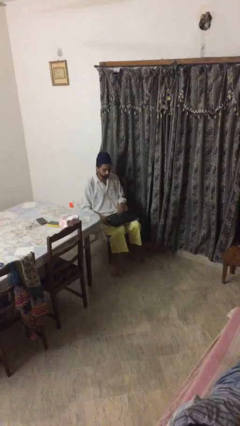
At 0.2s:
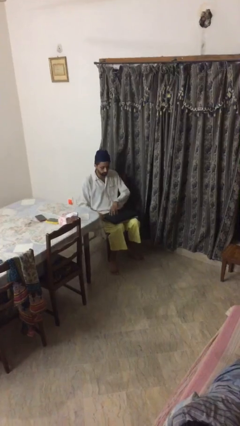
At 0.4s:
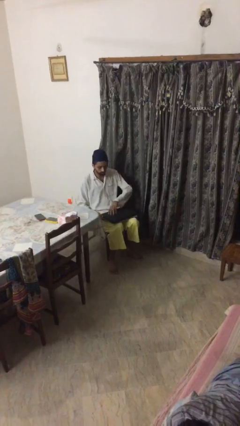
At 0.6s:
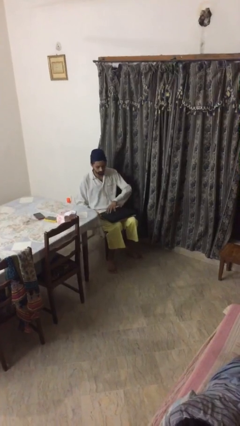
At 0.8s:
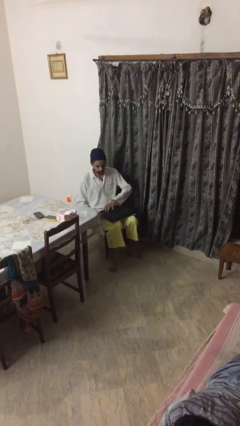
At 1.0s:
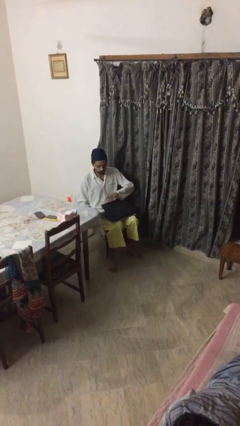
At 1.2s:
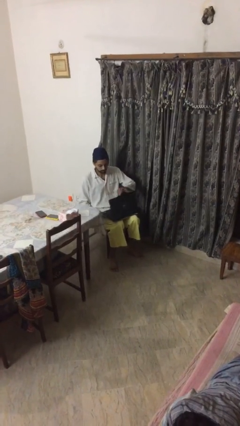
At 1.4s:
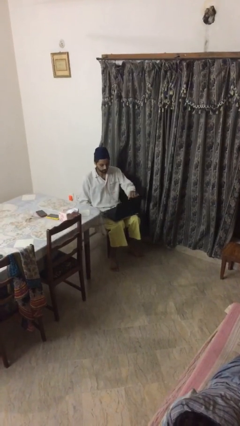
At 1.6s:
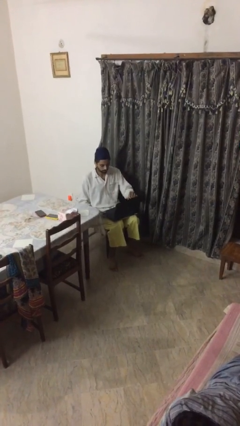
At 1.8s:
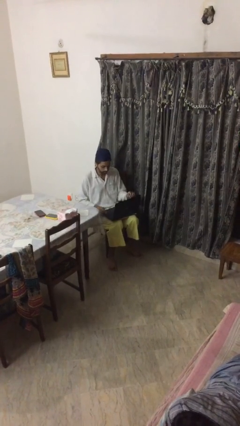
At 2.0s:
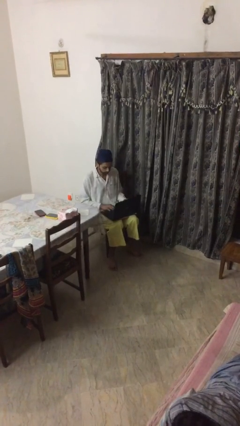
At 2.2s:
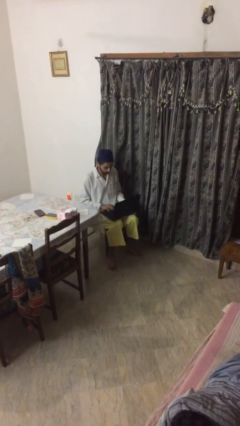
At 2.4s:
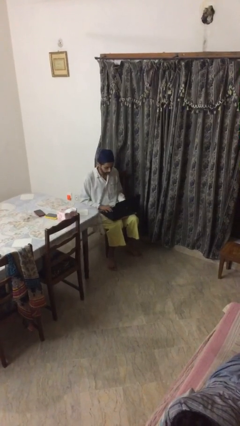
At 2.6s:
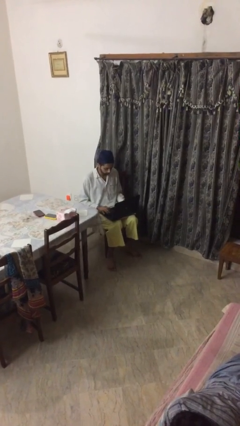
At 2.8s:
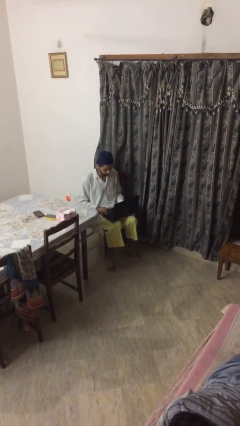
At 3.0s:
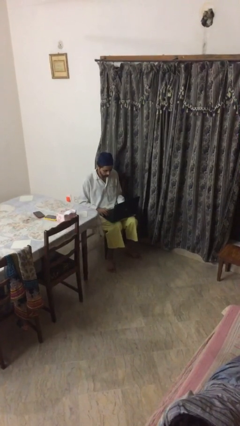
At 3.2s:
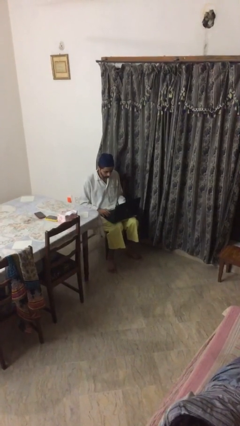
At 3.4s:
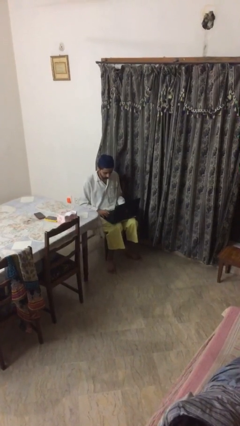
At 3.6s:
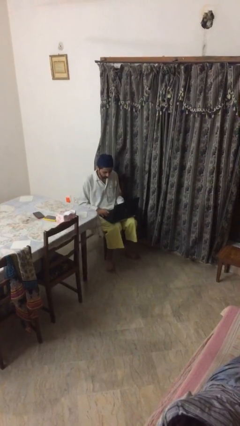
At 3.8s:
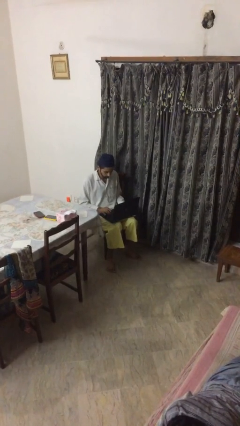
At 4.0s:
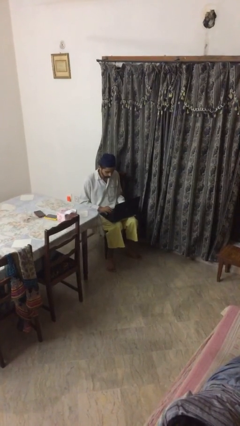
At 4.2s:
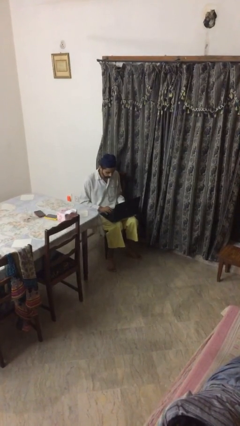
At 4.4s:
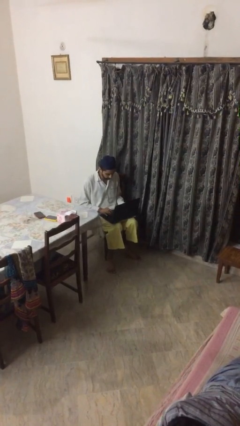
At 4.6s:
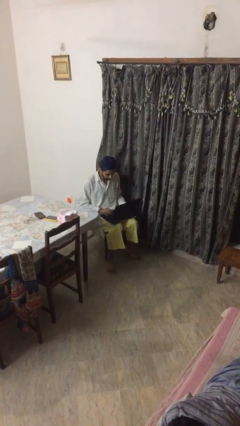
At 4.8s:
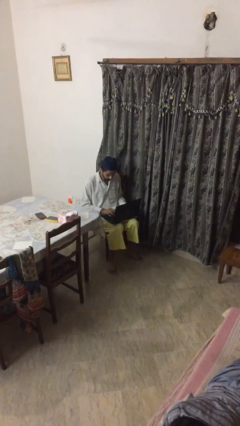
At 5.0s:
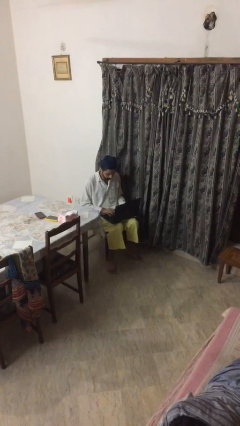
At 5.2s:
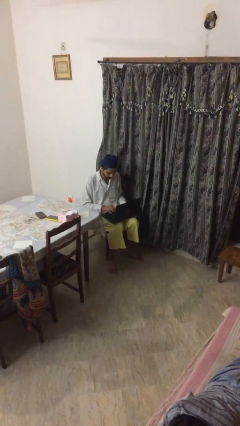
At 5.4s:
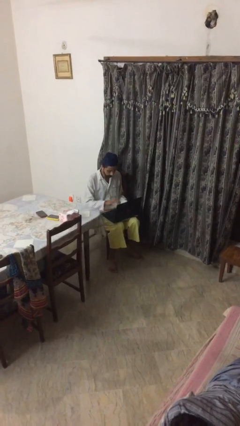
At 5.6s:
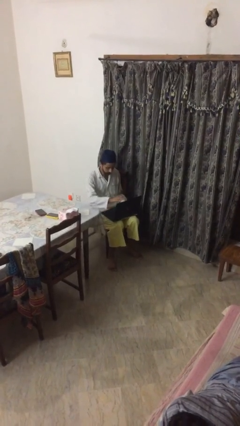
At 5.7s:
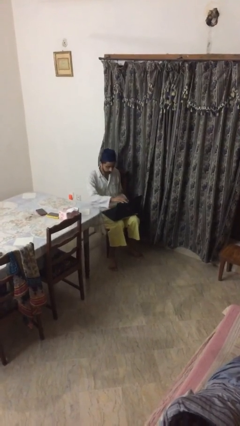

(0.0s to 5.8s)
person interacts with laptop

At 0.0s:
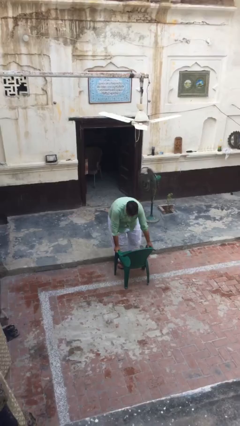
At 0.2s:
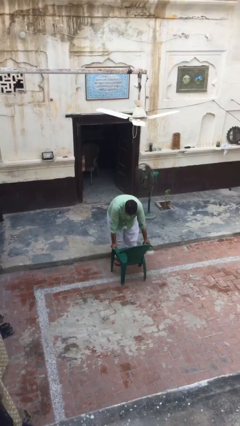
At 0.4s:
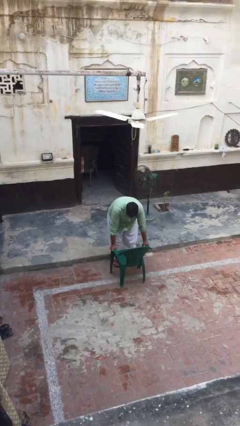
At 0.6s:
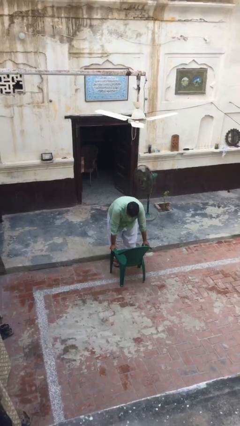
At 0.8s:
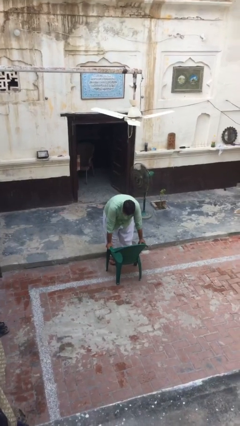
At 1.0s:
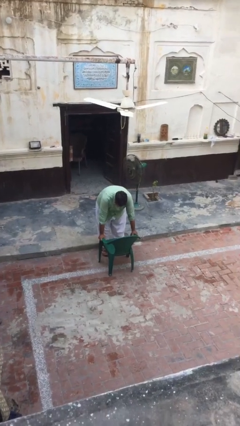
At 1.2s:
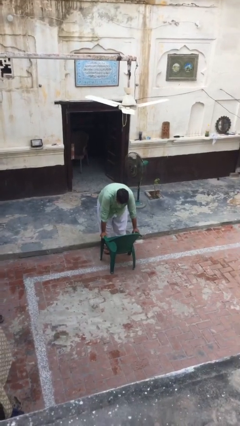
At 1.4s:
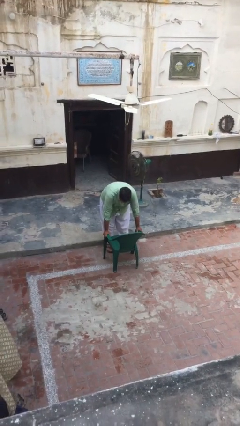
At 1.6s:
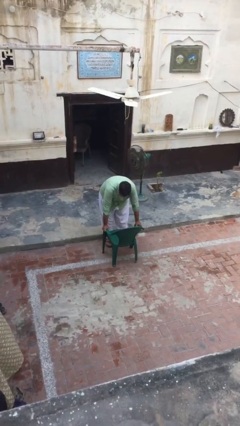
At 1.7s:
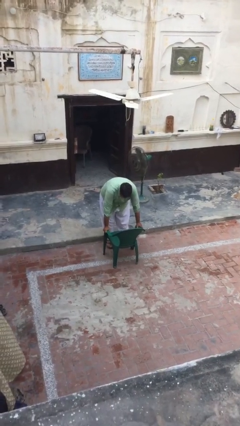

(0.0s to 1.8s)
person puts down object on floor

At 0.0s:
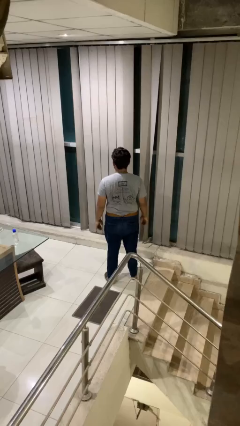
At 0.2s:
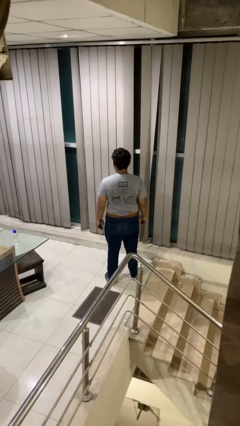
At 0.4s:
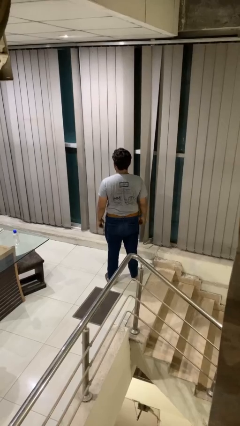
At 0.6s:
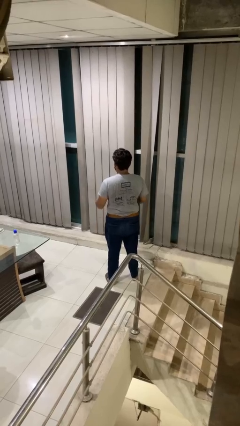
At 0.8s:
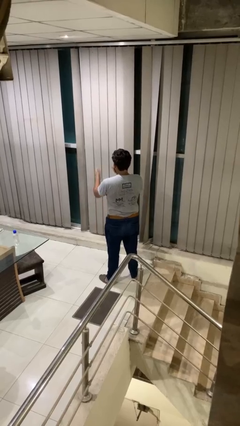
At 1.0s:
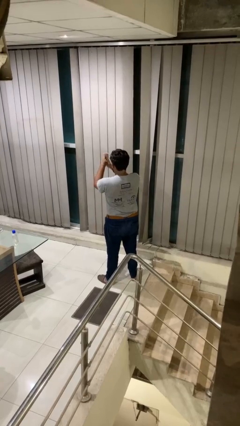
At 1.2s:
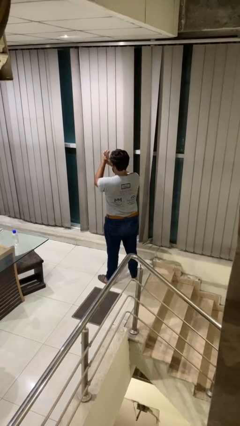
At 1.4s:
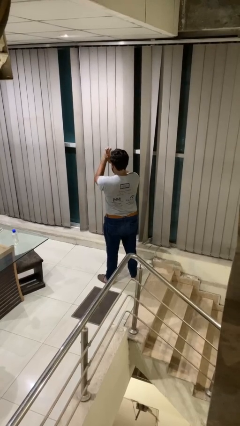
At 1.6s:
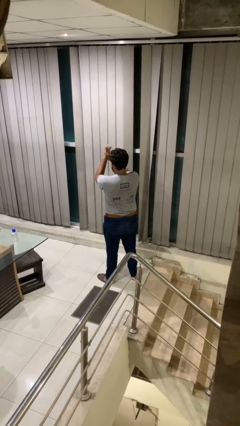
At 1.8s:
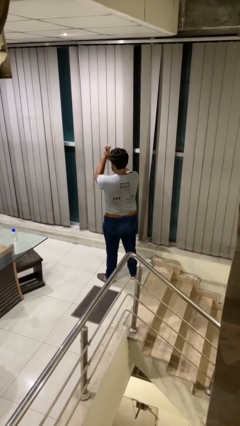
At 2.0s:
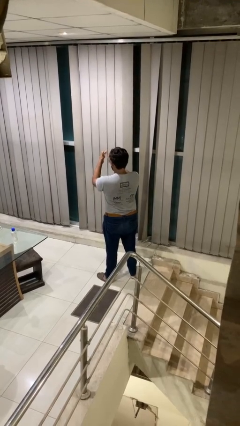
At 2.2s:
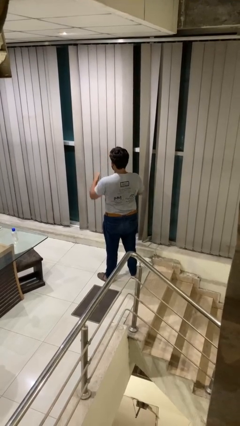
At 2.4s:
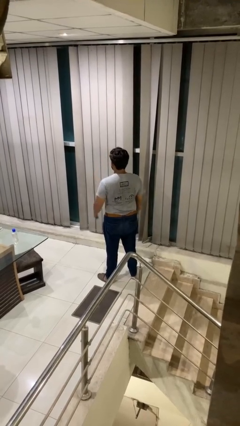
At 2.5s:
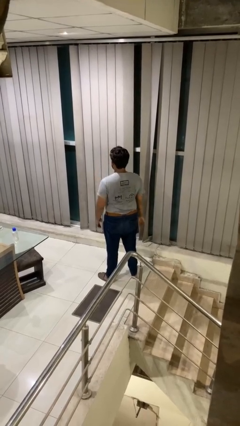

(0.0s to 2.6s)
person claps hands

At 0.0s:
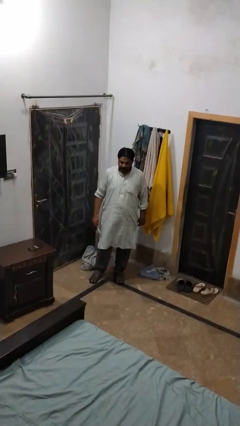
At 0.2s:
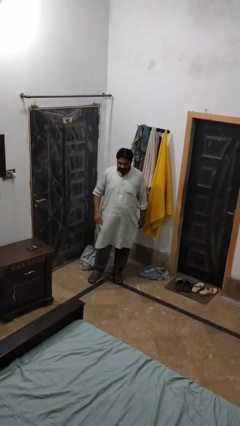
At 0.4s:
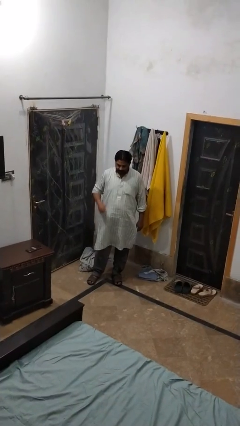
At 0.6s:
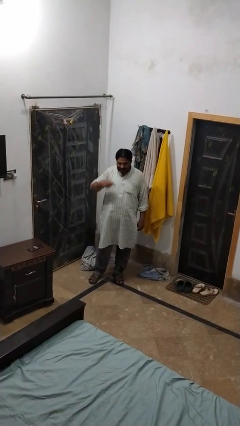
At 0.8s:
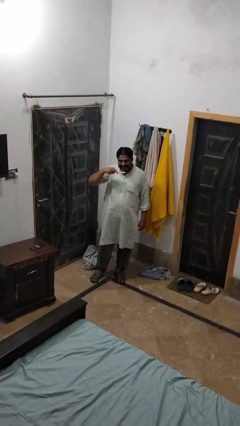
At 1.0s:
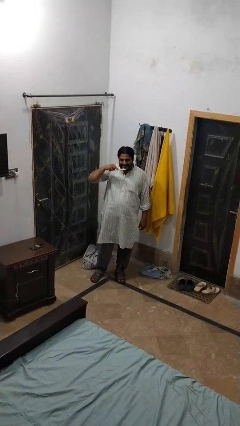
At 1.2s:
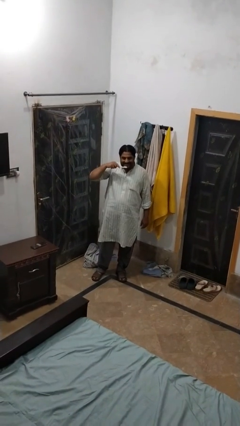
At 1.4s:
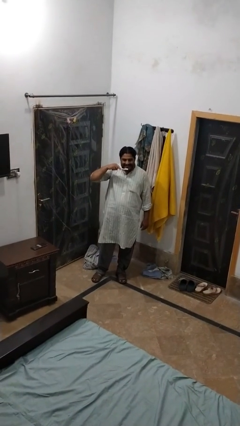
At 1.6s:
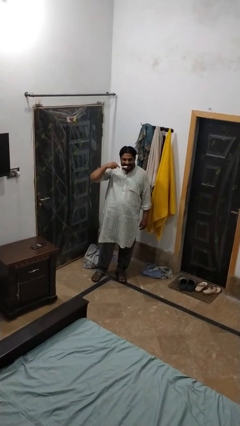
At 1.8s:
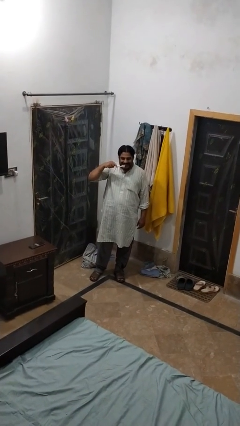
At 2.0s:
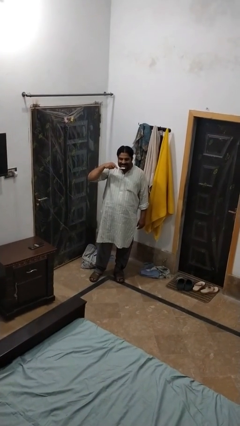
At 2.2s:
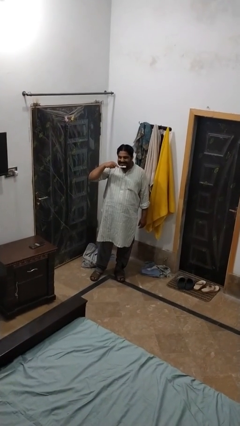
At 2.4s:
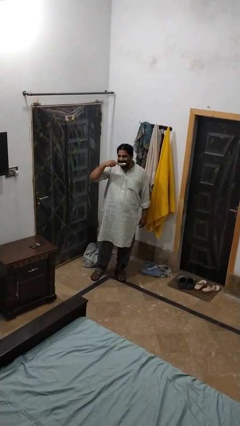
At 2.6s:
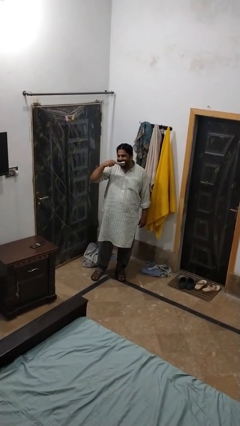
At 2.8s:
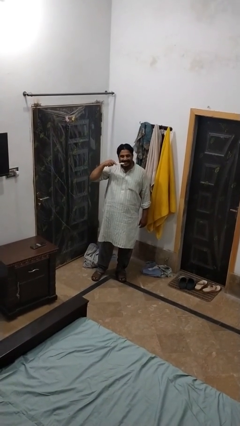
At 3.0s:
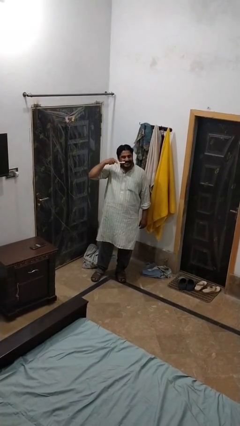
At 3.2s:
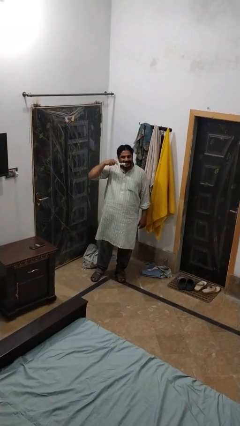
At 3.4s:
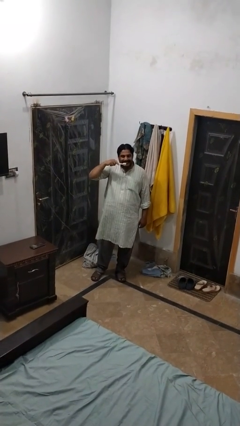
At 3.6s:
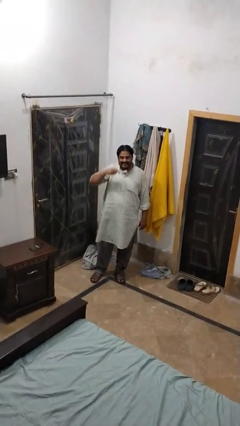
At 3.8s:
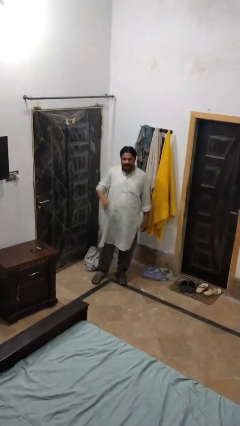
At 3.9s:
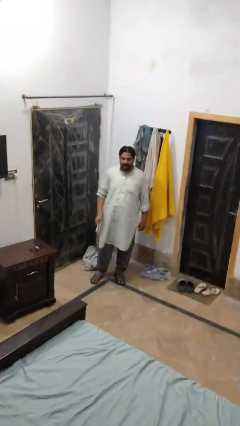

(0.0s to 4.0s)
person brushes teeth

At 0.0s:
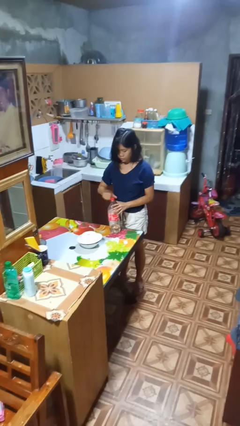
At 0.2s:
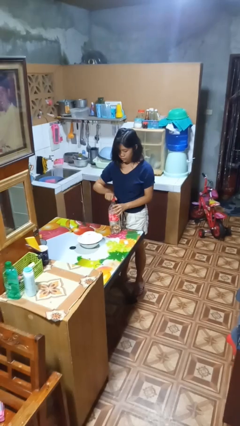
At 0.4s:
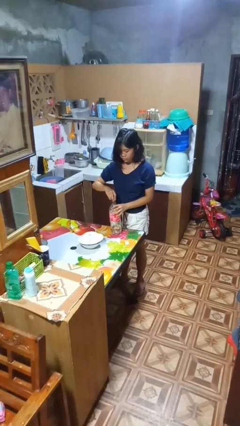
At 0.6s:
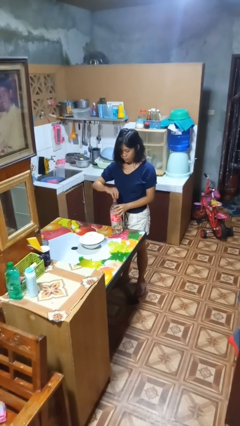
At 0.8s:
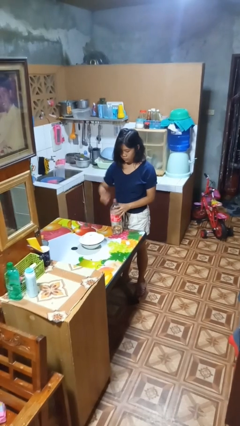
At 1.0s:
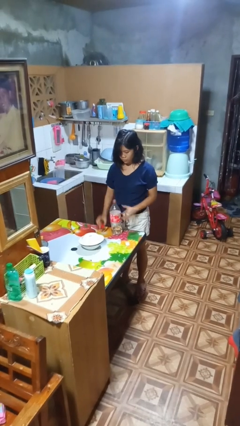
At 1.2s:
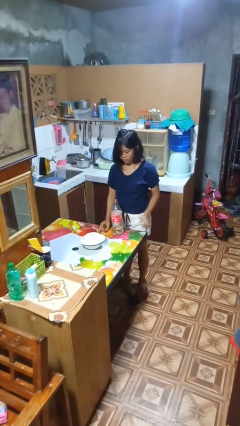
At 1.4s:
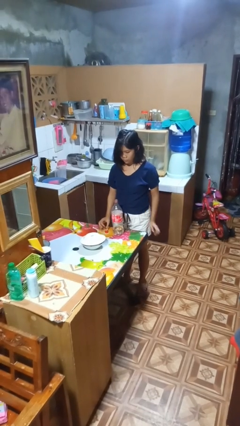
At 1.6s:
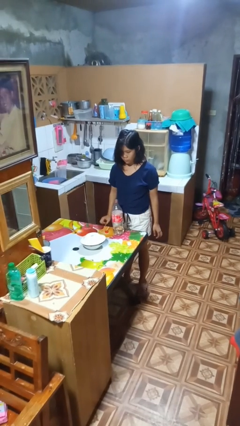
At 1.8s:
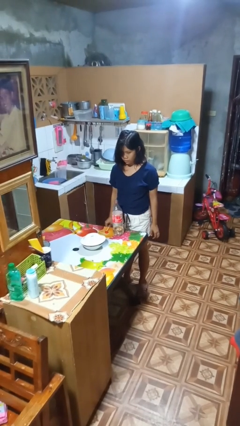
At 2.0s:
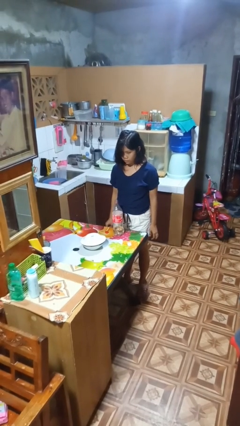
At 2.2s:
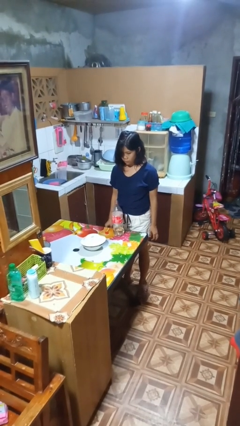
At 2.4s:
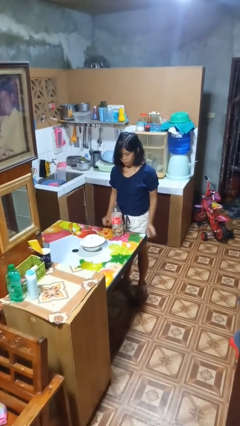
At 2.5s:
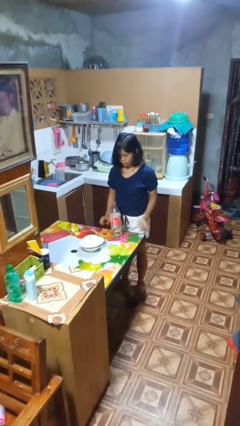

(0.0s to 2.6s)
person unscrews lid from bottle

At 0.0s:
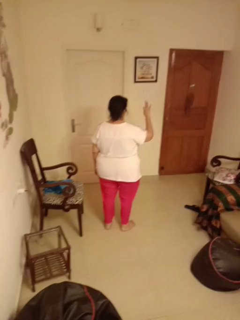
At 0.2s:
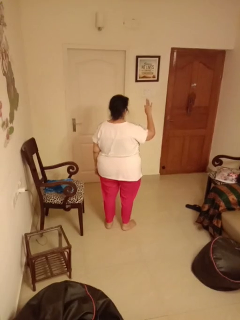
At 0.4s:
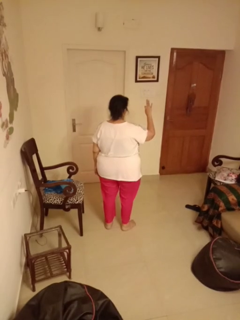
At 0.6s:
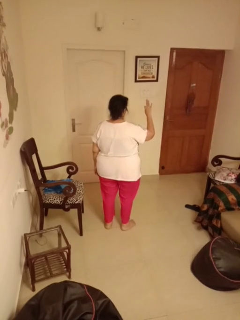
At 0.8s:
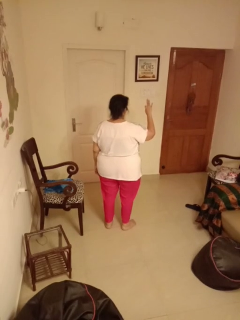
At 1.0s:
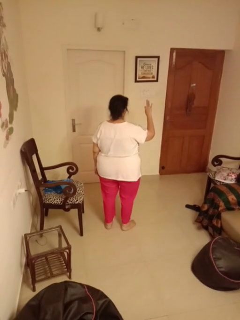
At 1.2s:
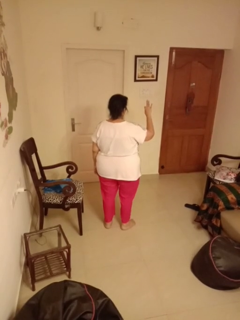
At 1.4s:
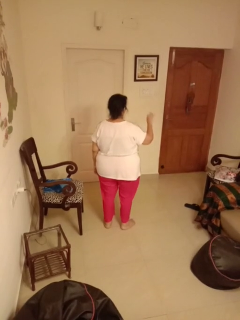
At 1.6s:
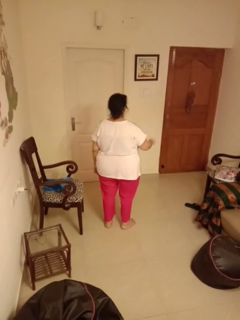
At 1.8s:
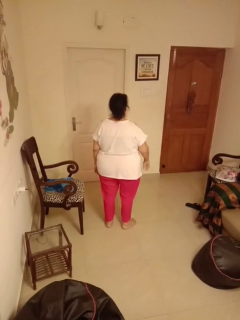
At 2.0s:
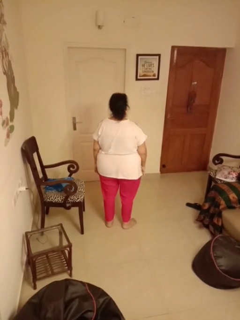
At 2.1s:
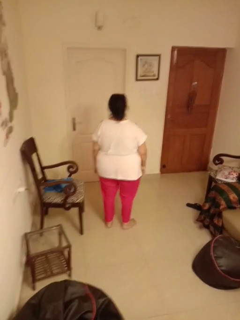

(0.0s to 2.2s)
person gestures number three
